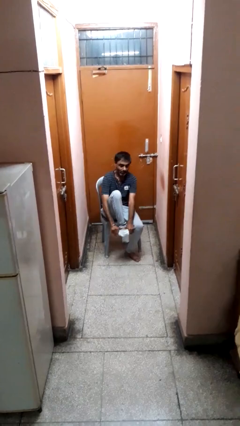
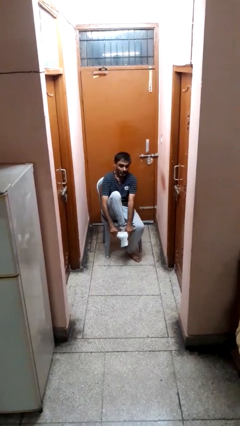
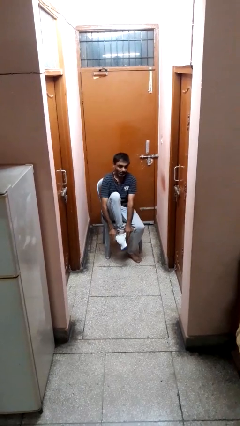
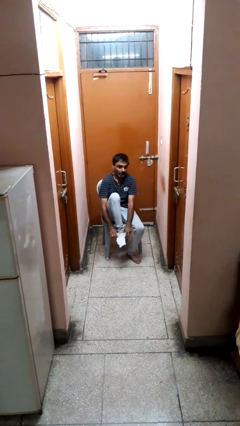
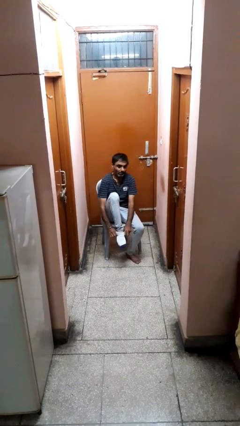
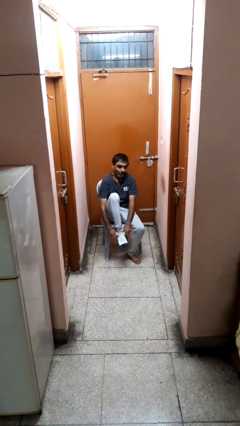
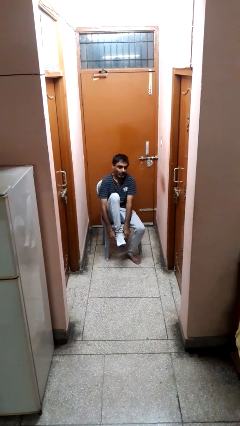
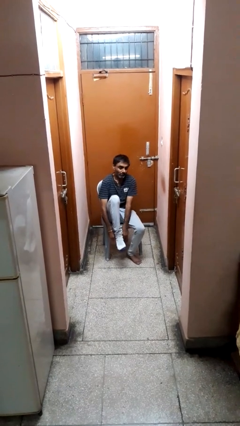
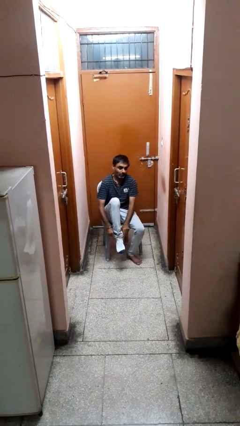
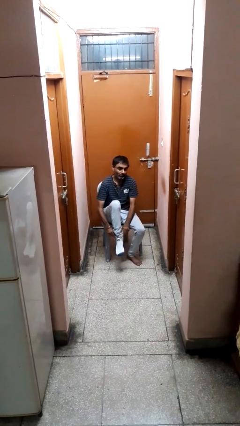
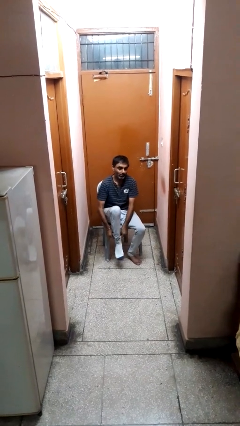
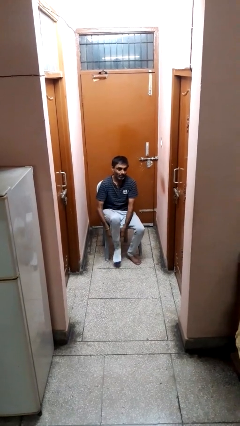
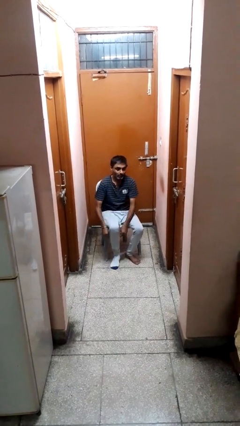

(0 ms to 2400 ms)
person puts on socks

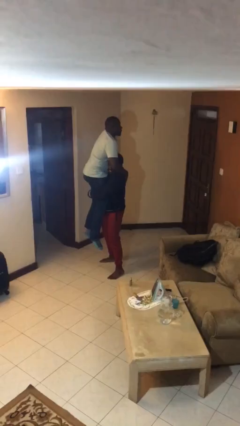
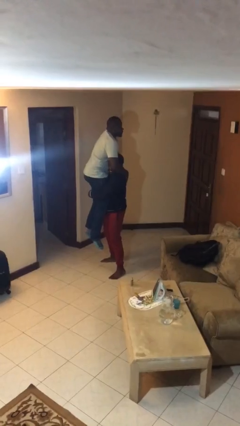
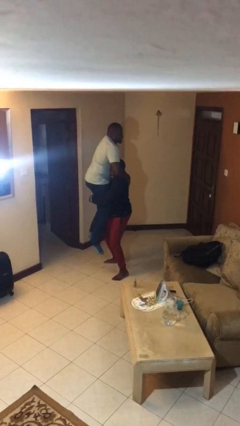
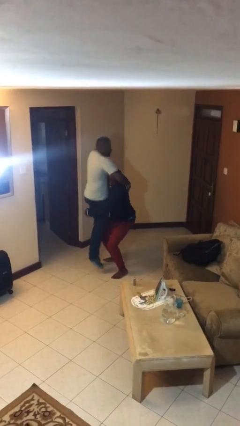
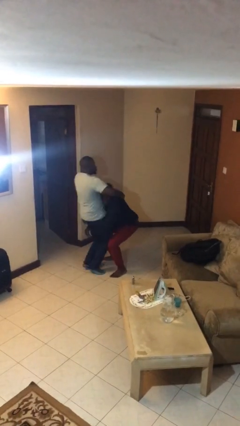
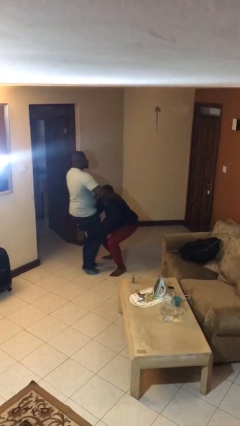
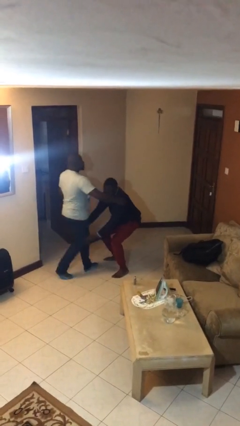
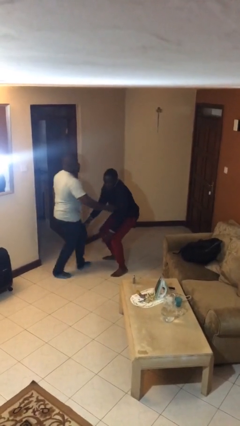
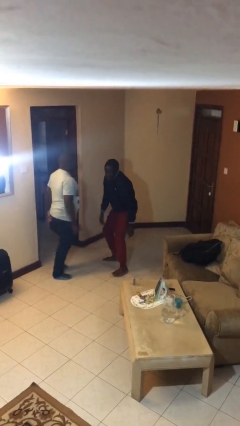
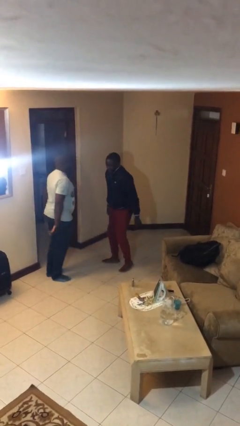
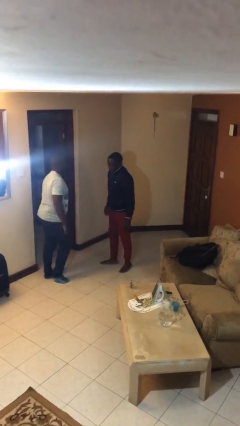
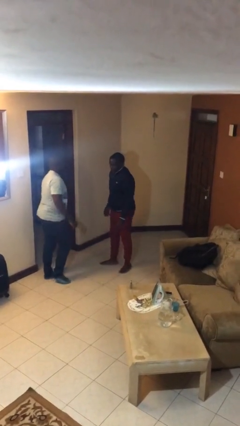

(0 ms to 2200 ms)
person puts down person

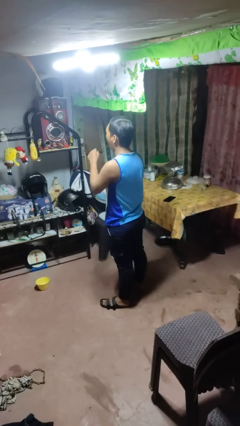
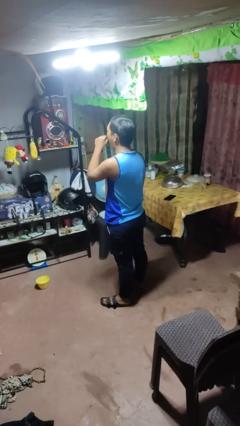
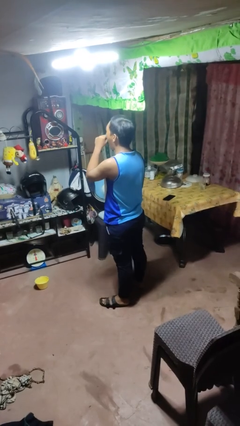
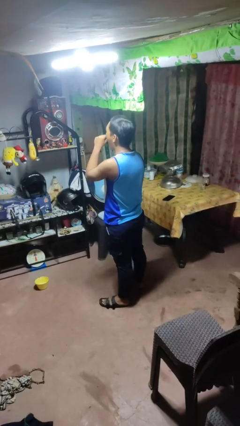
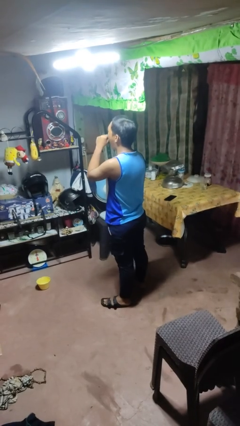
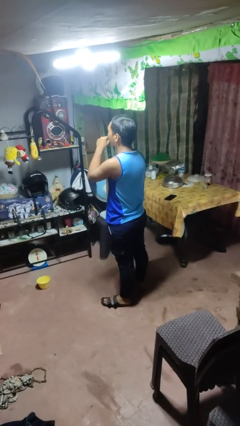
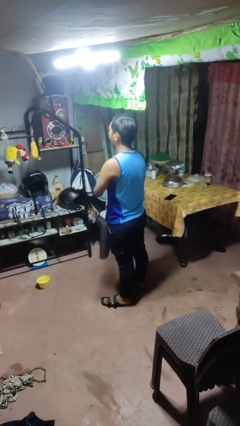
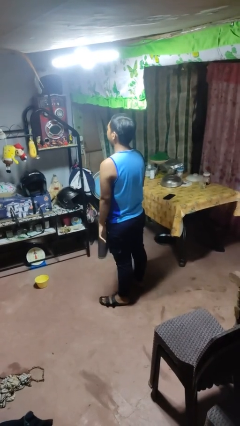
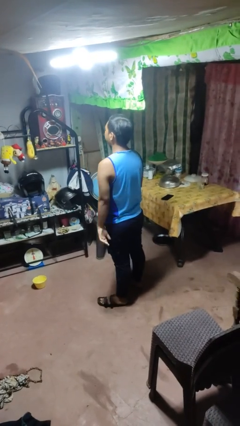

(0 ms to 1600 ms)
person yawns

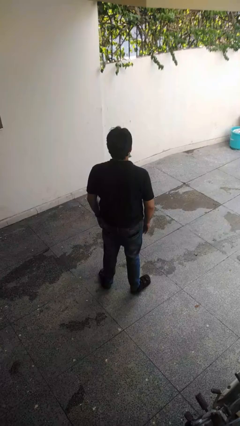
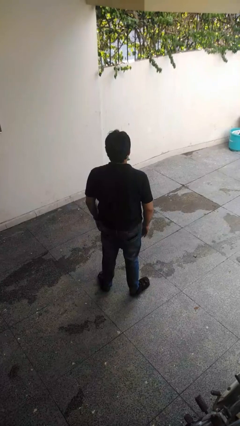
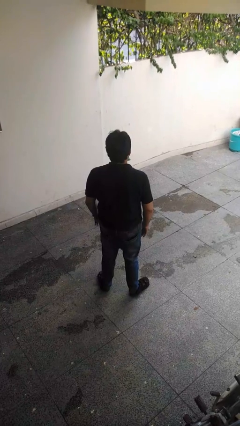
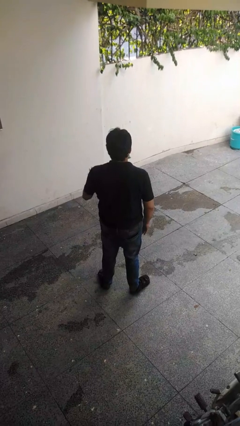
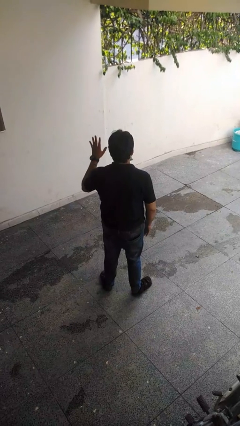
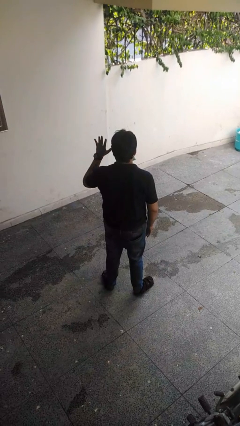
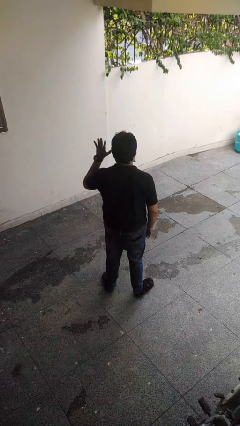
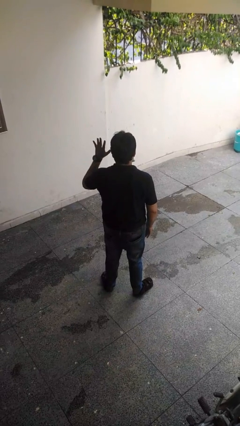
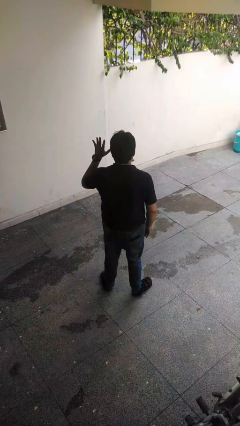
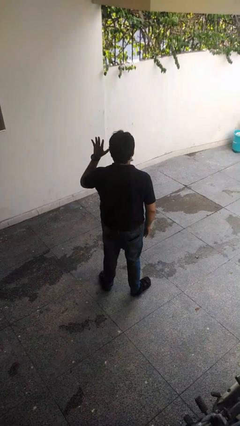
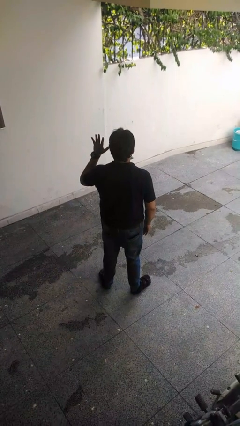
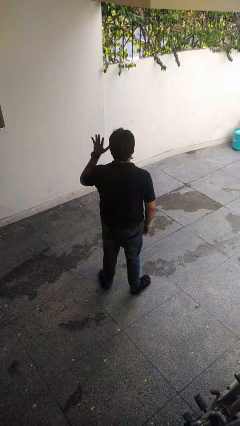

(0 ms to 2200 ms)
person gestures number five

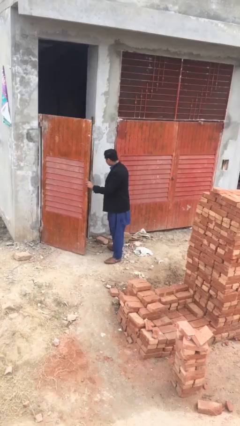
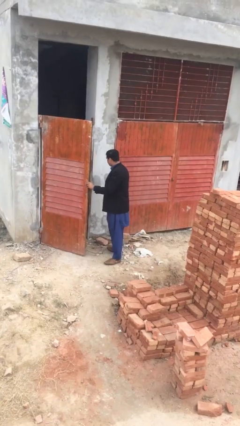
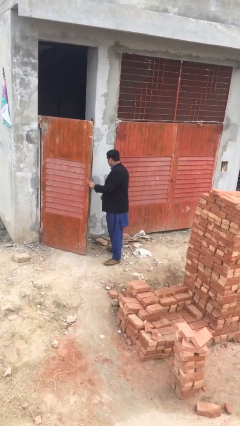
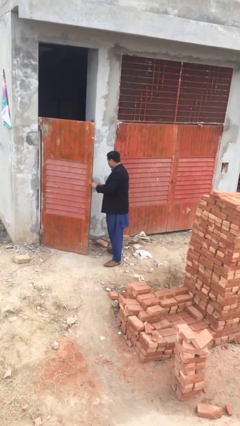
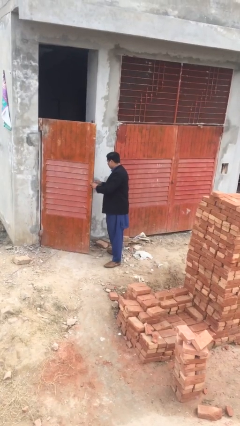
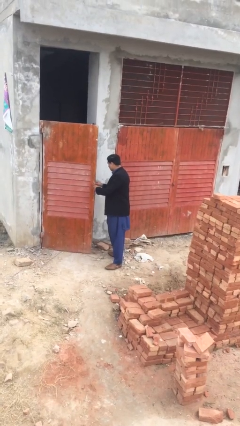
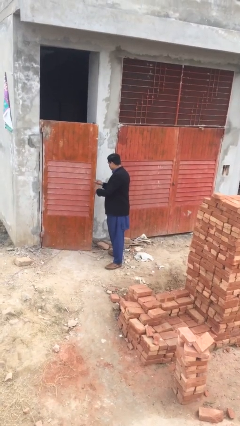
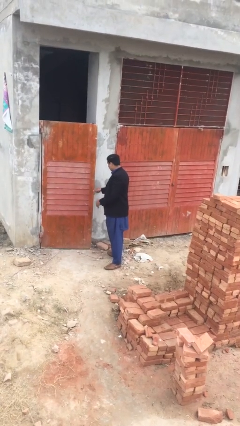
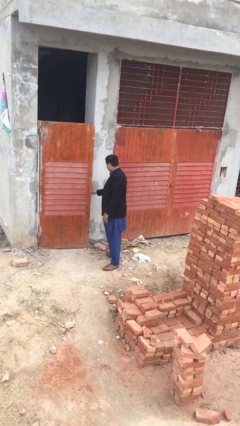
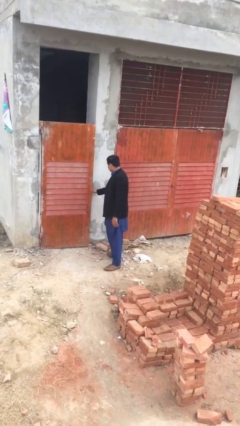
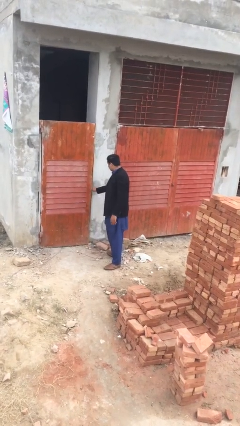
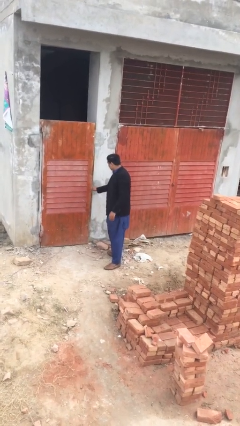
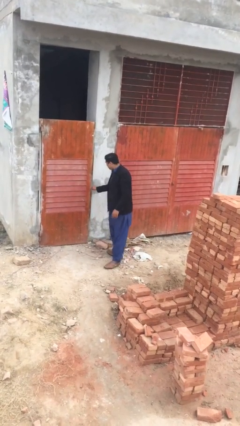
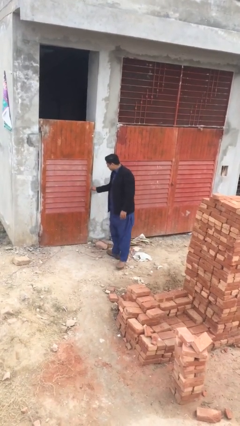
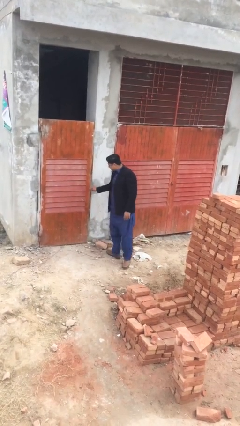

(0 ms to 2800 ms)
person closes facility door

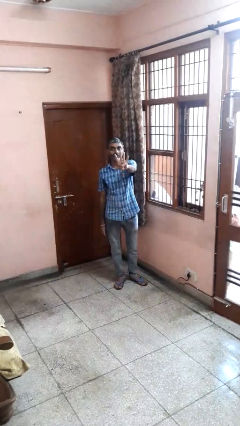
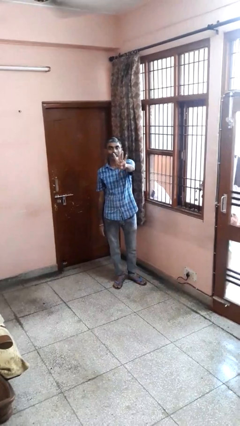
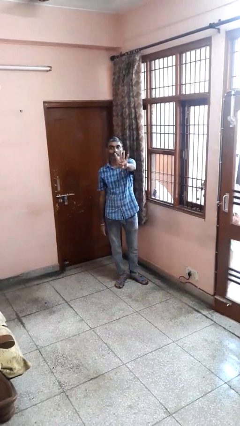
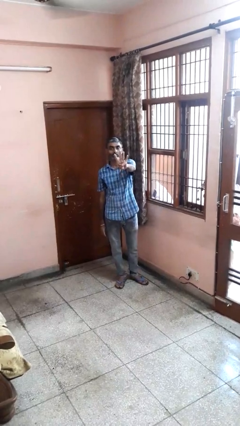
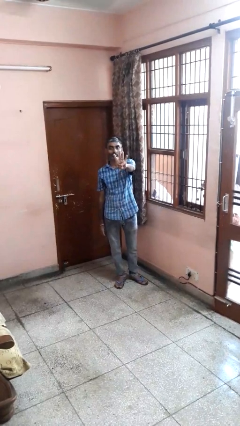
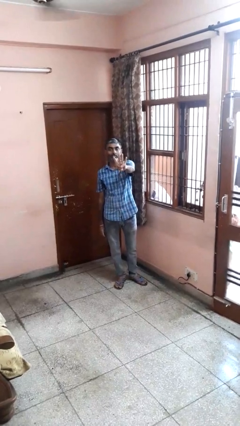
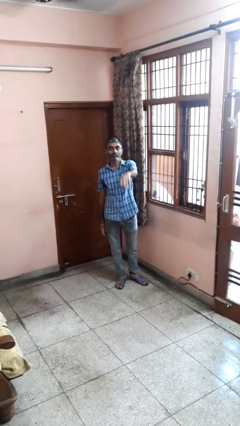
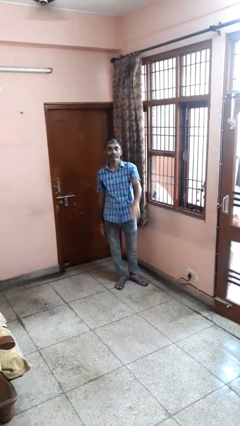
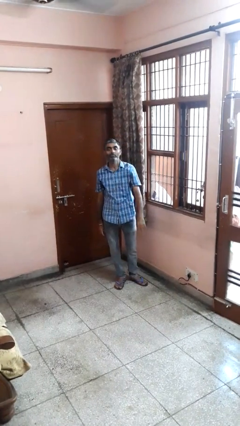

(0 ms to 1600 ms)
person gestures number four

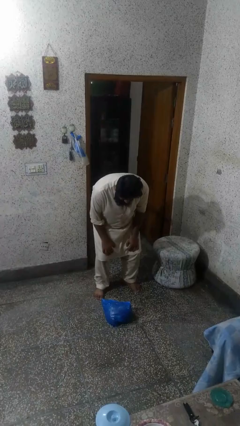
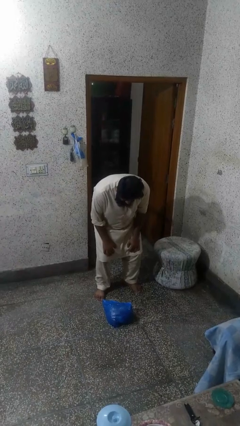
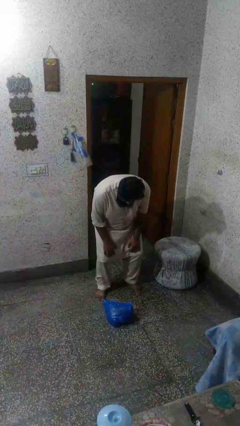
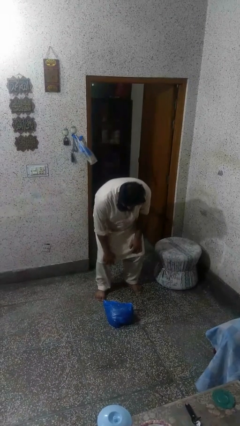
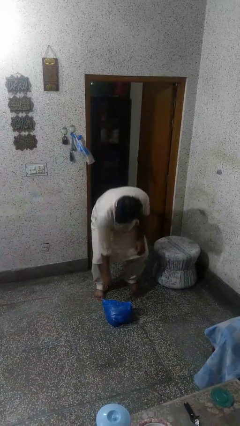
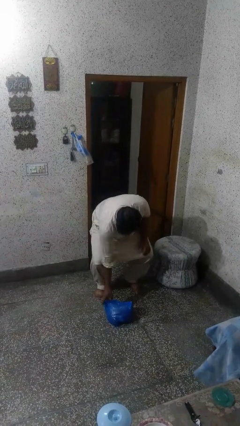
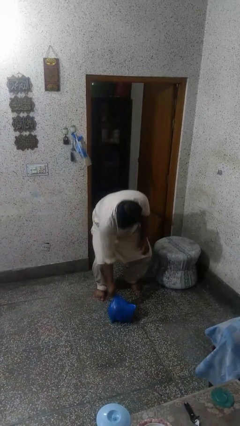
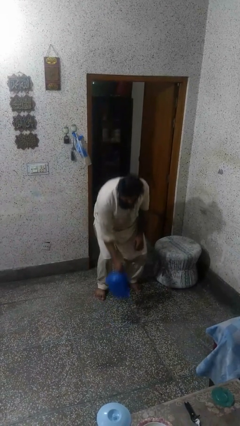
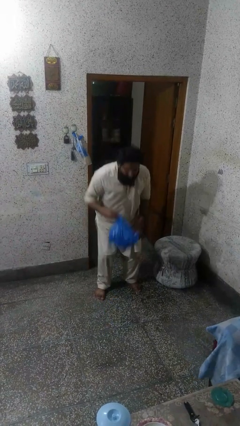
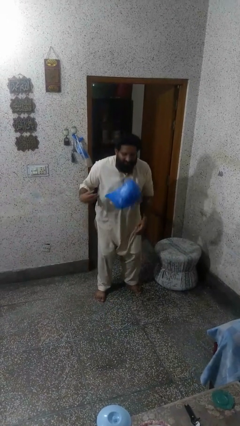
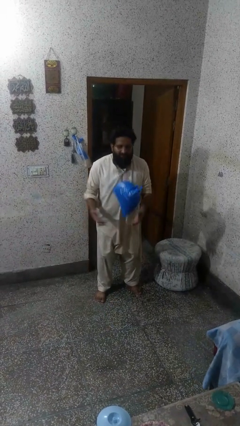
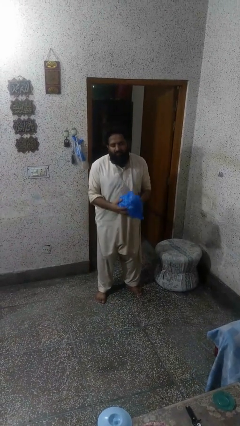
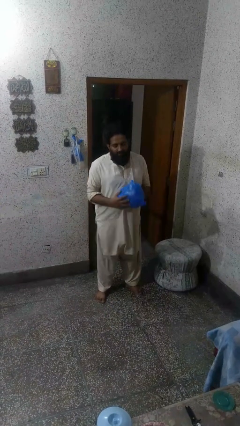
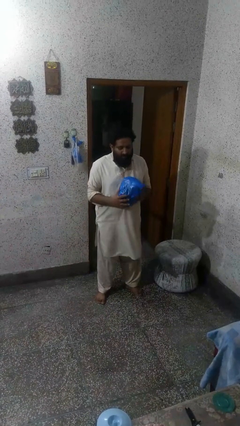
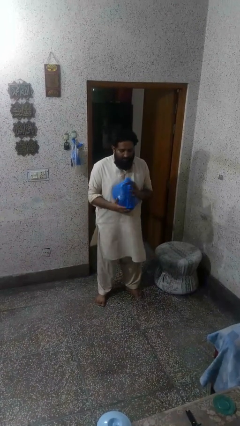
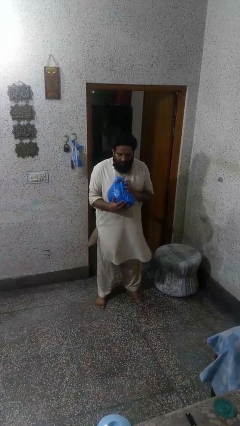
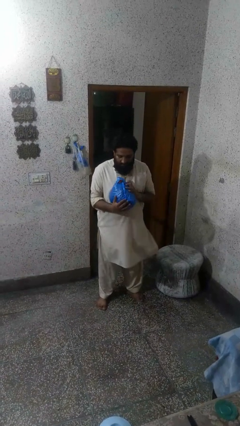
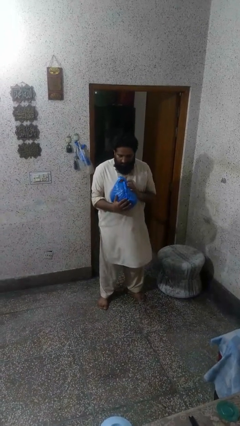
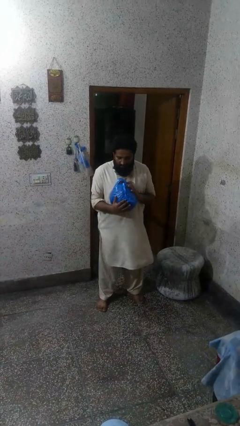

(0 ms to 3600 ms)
person picks up object from floor

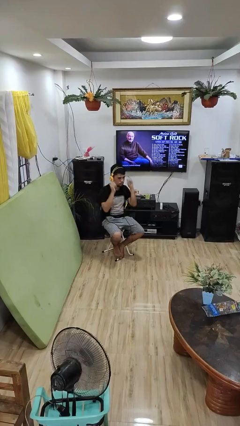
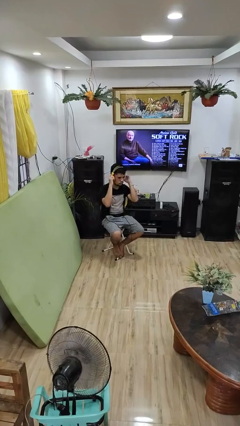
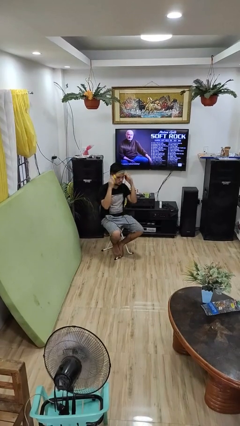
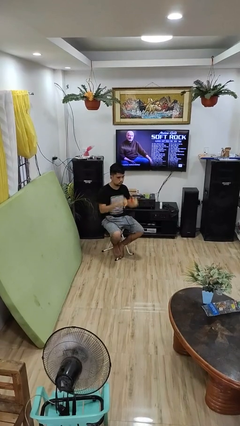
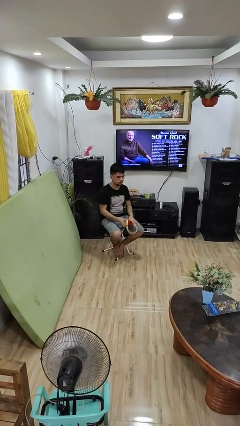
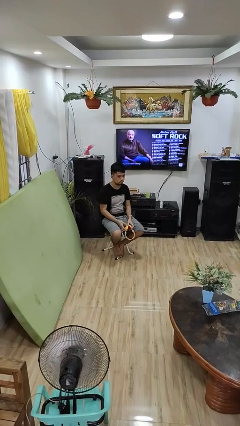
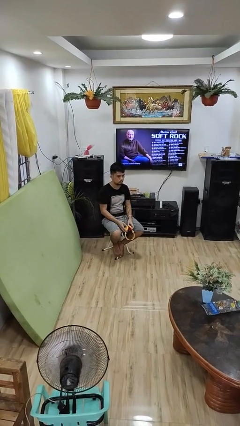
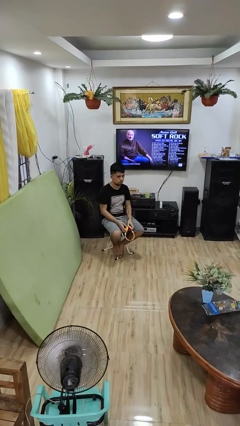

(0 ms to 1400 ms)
person takes off headphones
